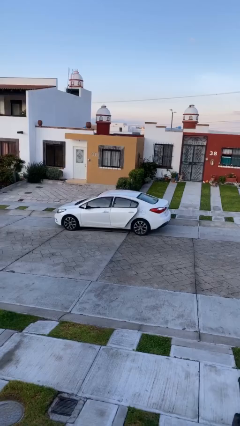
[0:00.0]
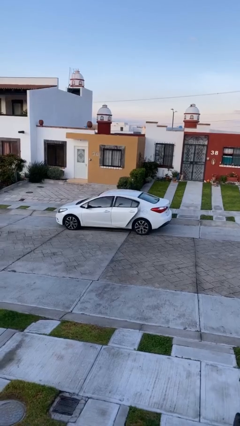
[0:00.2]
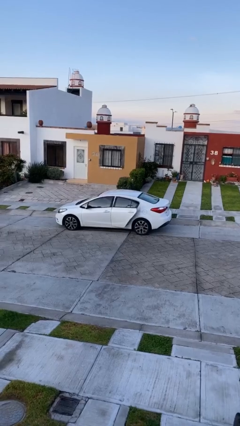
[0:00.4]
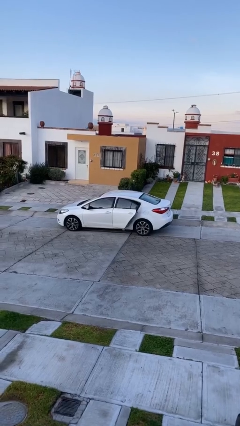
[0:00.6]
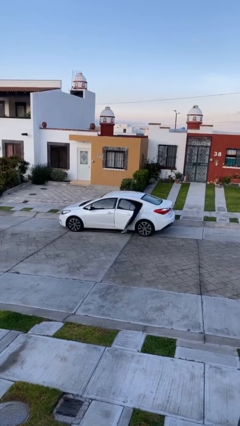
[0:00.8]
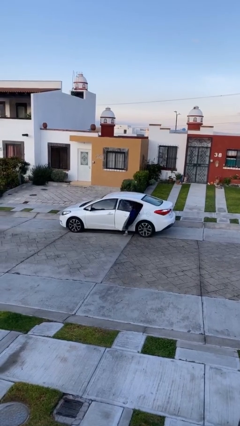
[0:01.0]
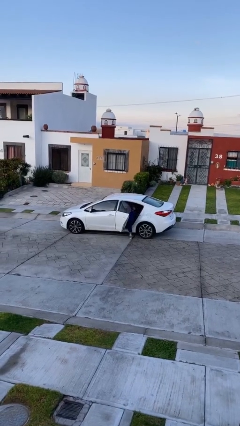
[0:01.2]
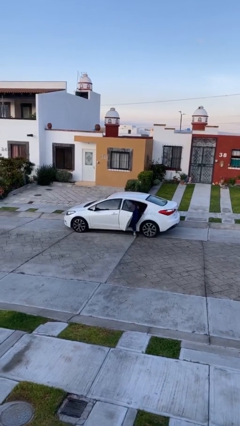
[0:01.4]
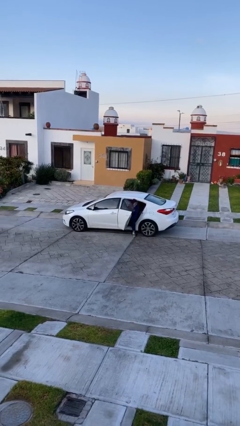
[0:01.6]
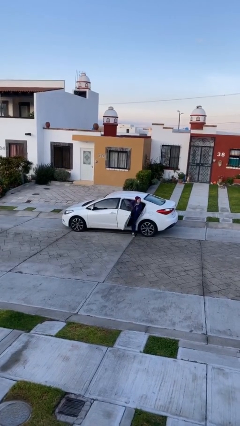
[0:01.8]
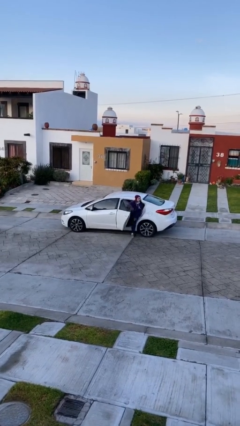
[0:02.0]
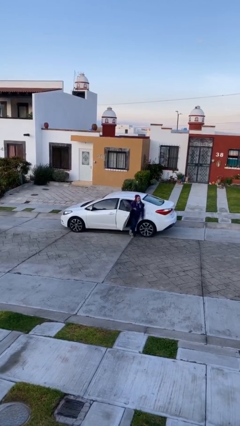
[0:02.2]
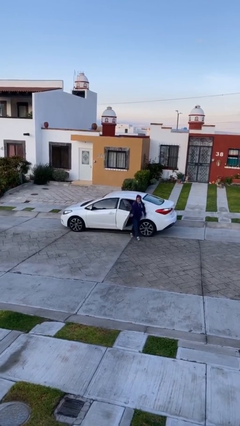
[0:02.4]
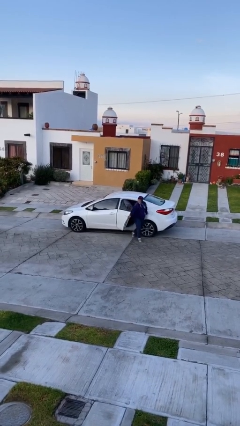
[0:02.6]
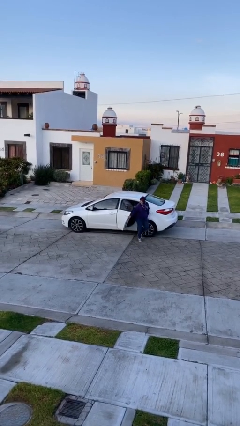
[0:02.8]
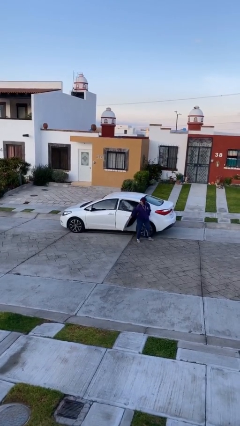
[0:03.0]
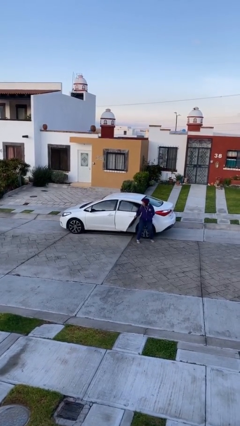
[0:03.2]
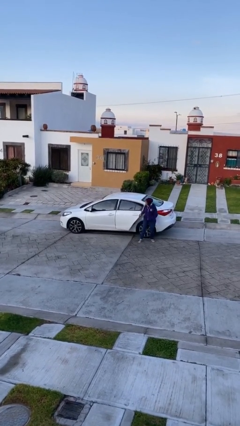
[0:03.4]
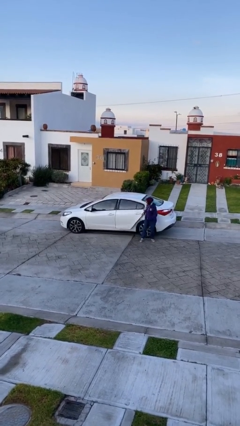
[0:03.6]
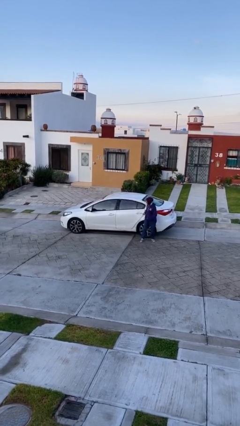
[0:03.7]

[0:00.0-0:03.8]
car drops off person

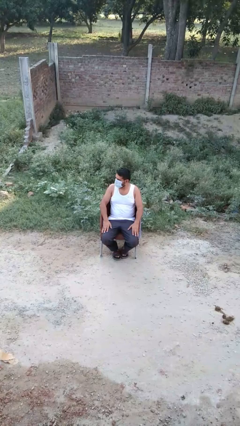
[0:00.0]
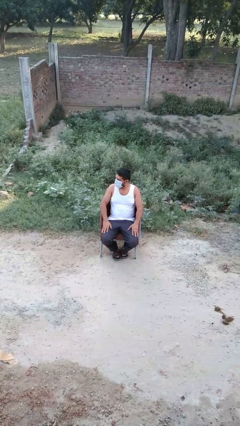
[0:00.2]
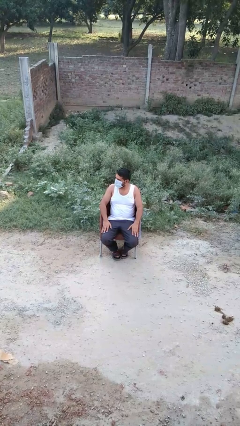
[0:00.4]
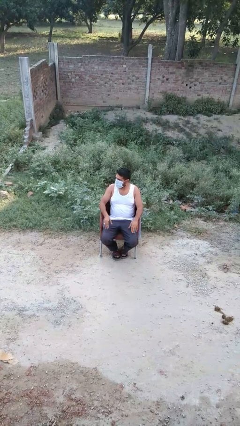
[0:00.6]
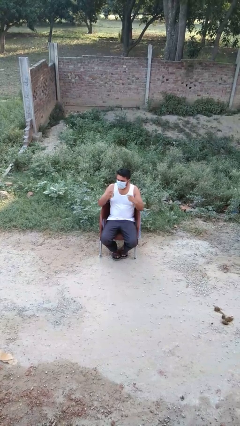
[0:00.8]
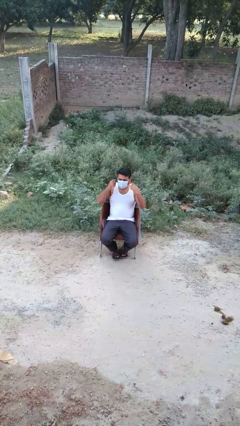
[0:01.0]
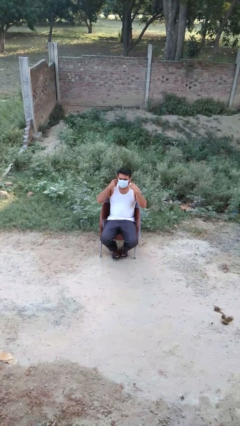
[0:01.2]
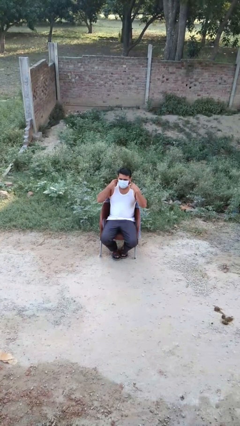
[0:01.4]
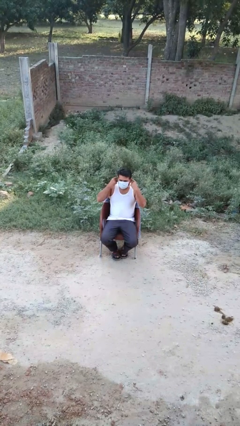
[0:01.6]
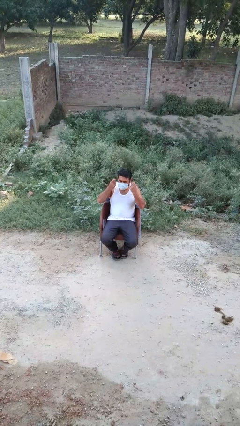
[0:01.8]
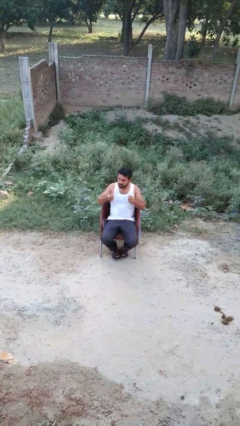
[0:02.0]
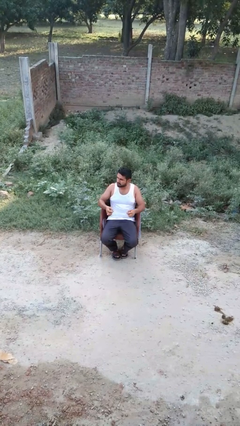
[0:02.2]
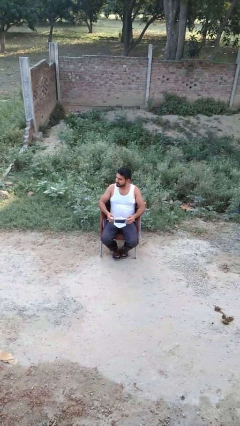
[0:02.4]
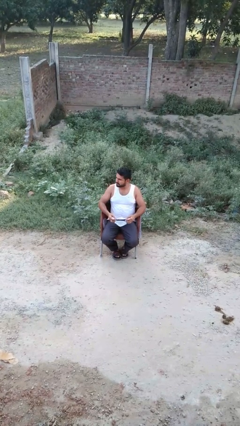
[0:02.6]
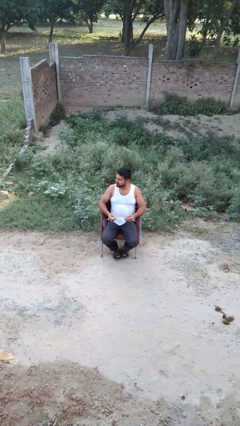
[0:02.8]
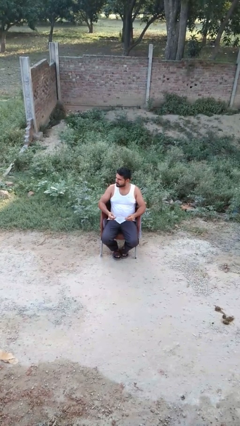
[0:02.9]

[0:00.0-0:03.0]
person takes off facemask

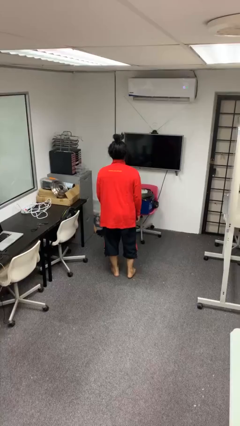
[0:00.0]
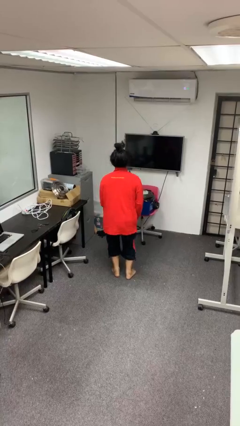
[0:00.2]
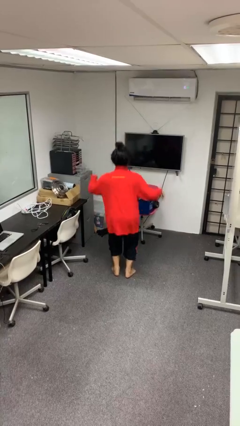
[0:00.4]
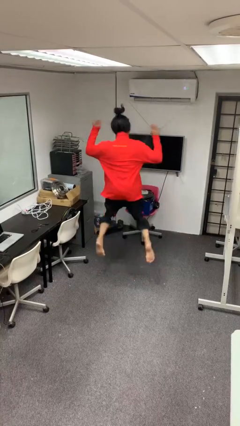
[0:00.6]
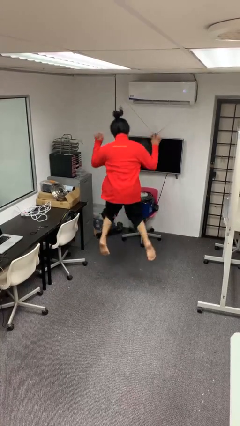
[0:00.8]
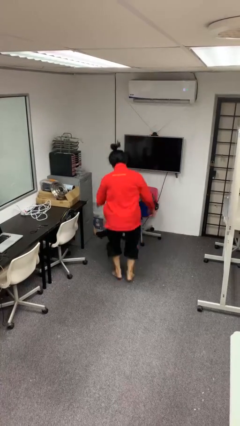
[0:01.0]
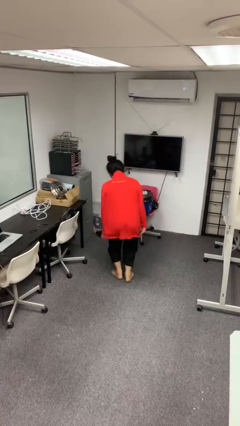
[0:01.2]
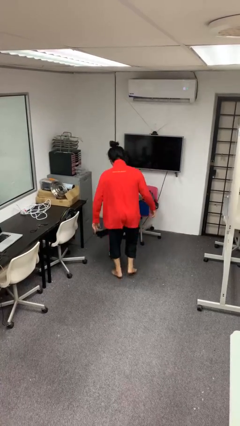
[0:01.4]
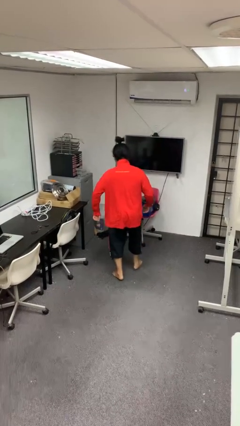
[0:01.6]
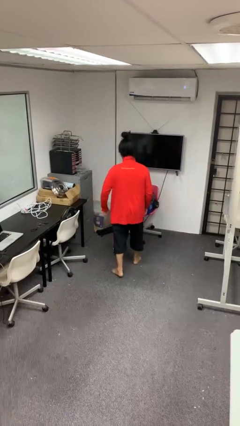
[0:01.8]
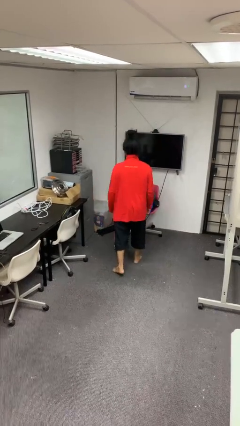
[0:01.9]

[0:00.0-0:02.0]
person jumps

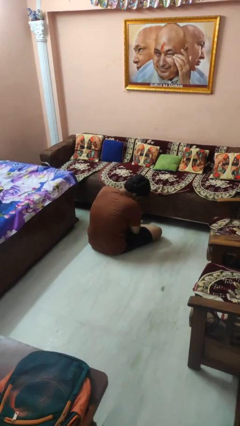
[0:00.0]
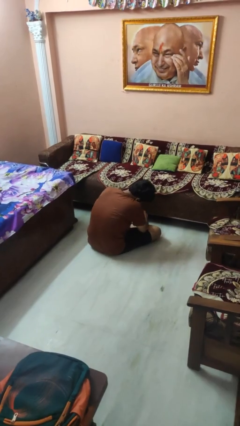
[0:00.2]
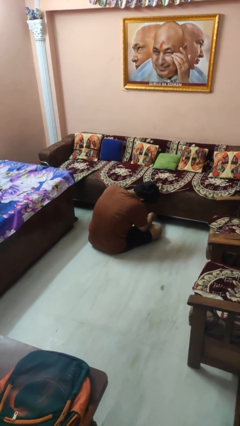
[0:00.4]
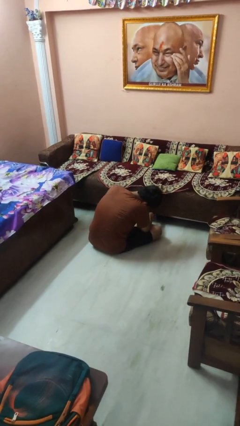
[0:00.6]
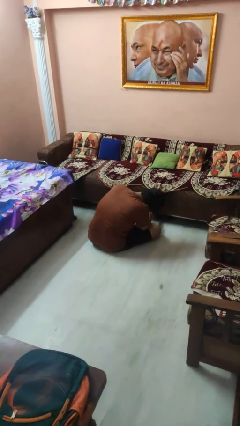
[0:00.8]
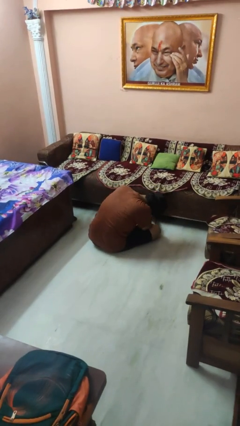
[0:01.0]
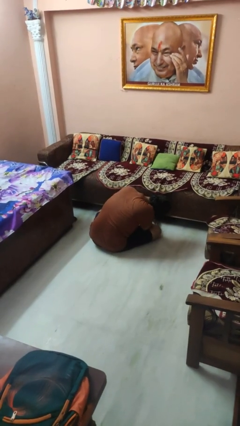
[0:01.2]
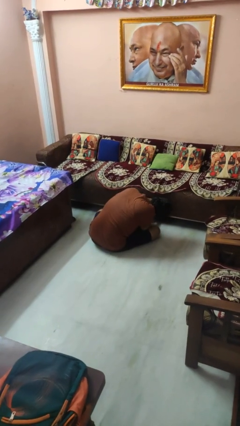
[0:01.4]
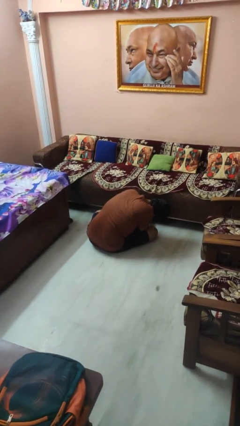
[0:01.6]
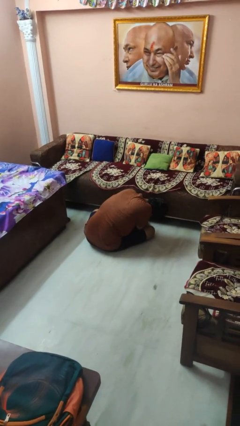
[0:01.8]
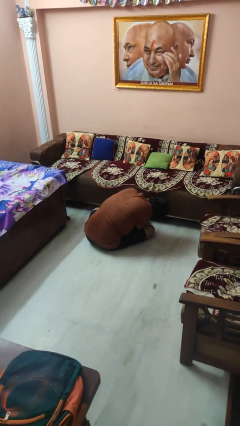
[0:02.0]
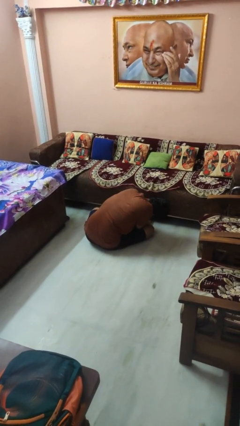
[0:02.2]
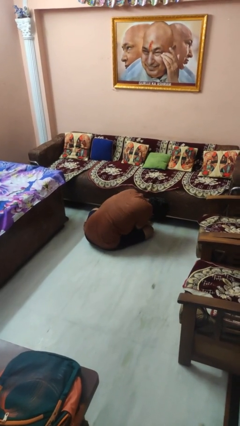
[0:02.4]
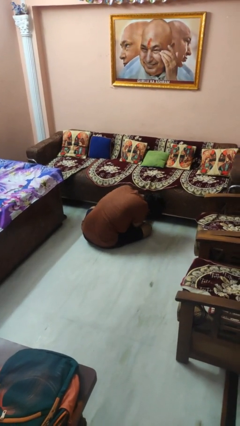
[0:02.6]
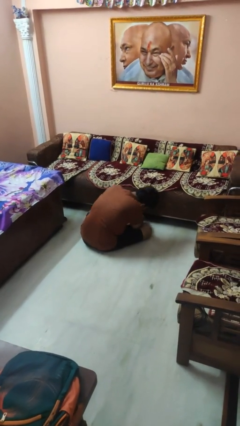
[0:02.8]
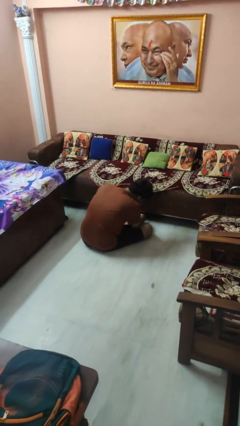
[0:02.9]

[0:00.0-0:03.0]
person searches under couch

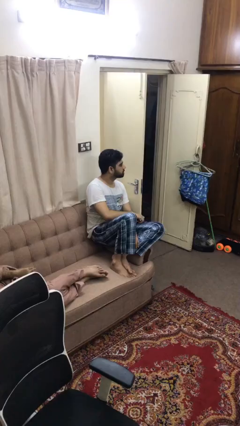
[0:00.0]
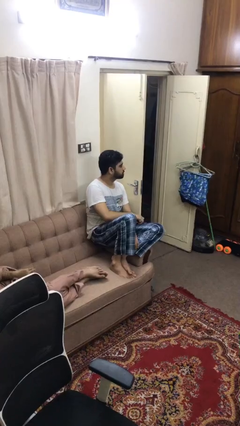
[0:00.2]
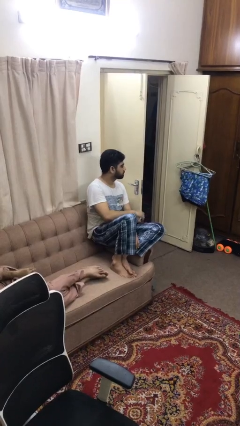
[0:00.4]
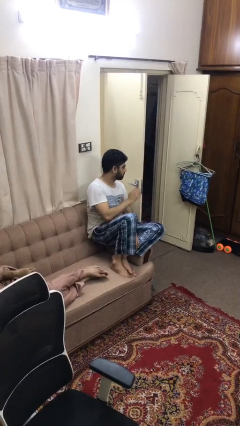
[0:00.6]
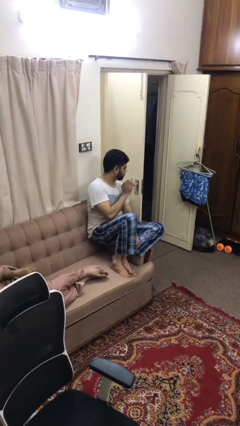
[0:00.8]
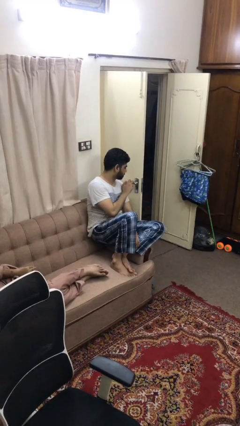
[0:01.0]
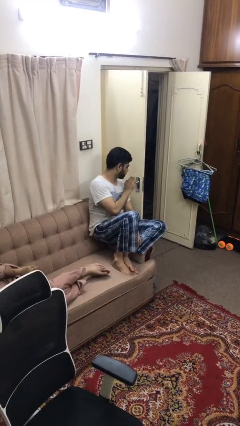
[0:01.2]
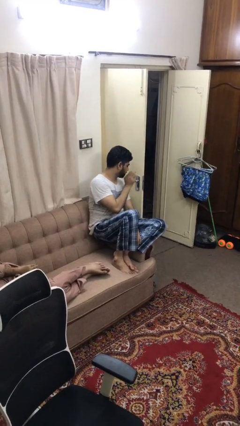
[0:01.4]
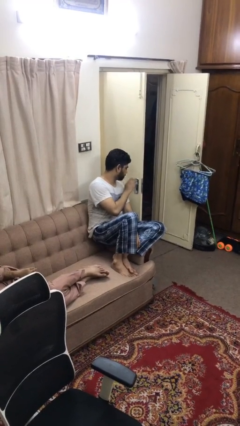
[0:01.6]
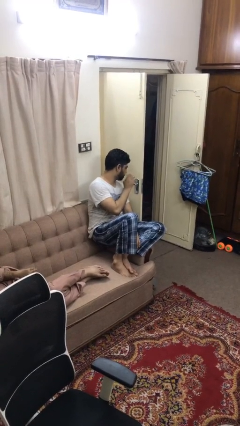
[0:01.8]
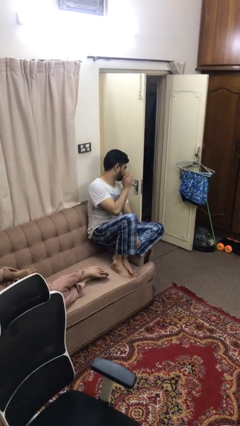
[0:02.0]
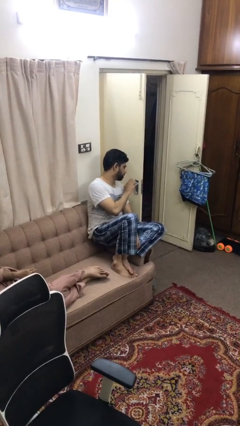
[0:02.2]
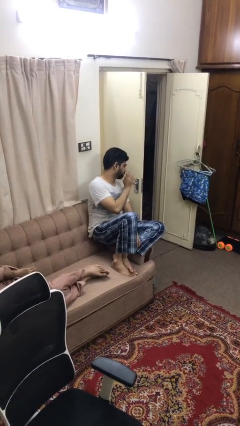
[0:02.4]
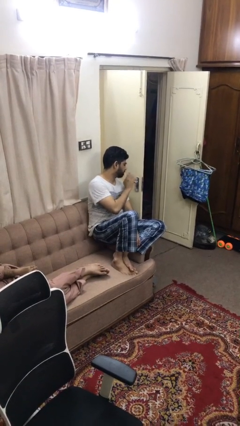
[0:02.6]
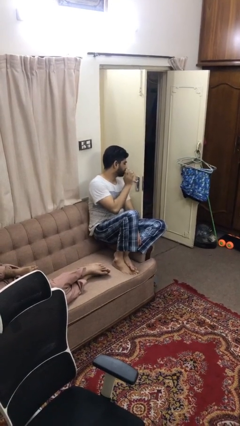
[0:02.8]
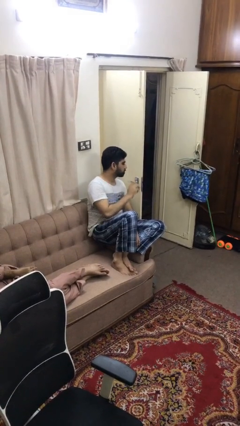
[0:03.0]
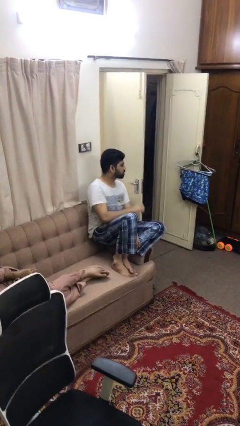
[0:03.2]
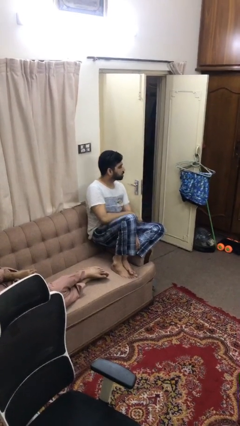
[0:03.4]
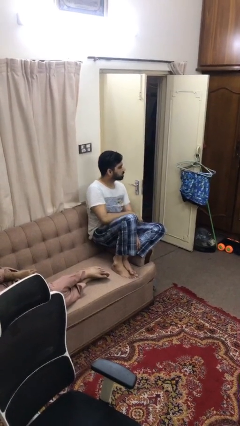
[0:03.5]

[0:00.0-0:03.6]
person taps object with finger

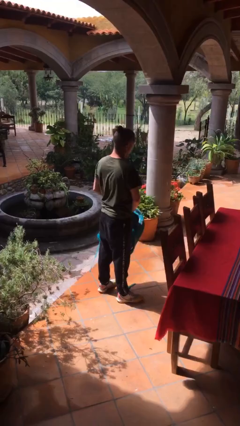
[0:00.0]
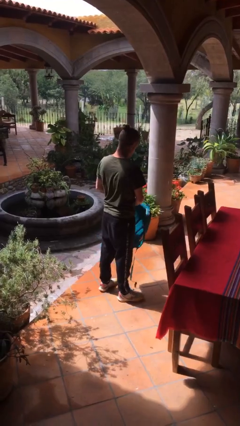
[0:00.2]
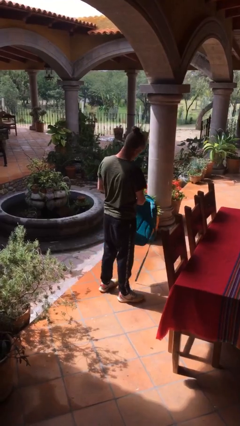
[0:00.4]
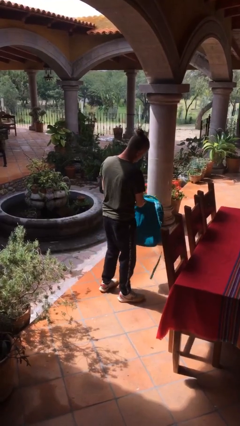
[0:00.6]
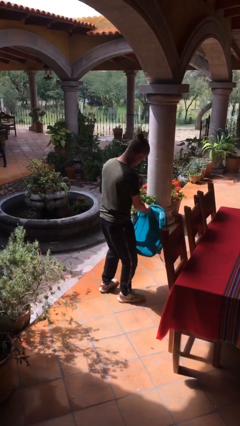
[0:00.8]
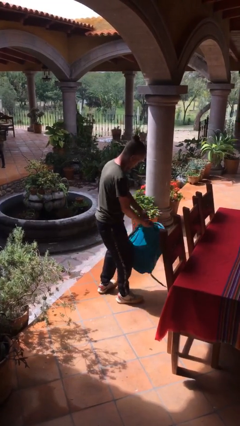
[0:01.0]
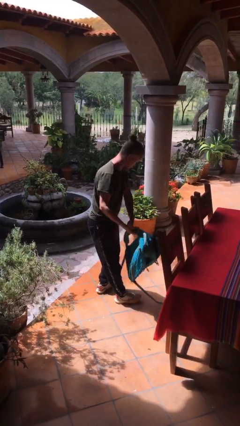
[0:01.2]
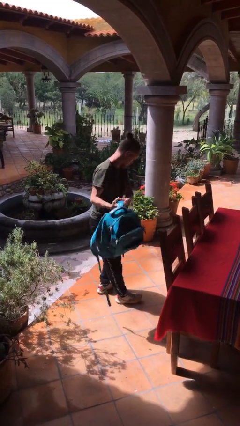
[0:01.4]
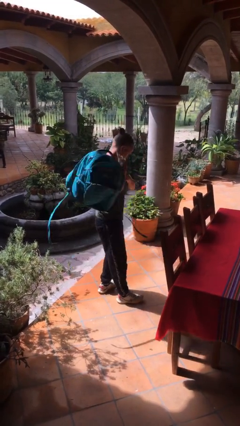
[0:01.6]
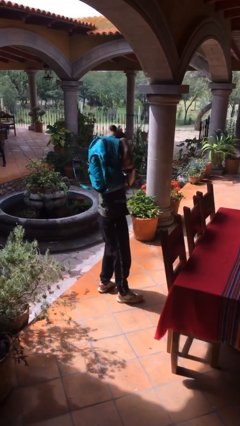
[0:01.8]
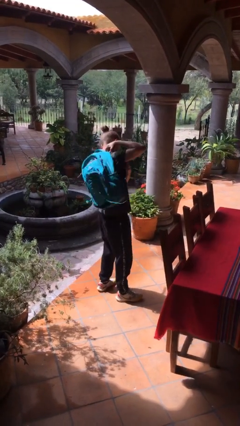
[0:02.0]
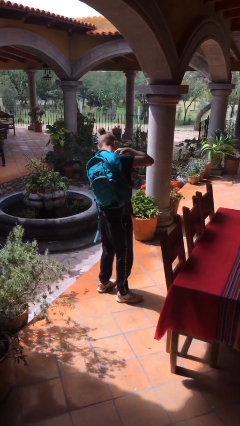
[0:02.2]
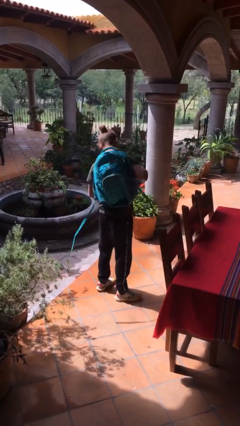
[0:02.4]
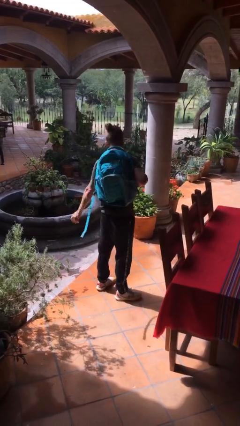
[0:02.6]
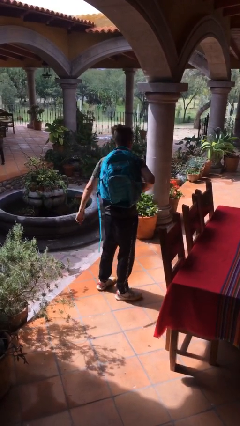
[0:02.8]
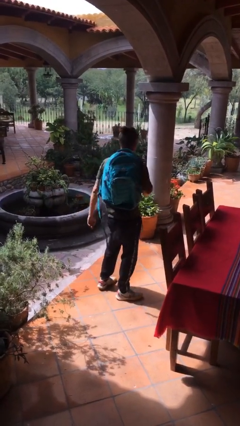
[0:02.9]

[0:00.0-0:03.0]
person puts on backpack
